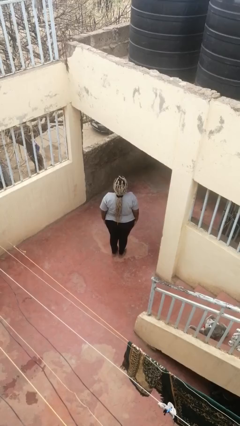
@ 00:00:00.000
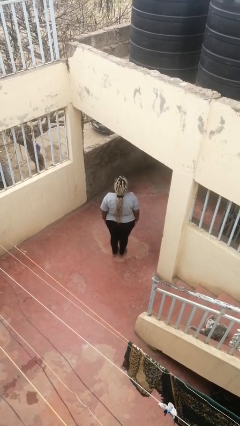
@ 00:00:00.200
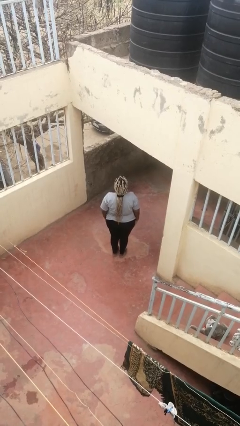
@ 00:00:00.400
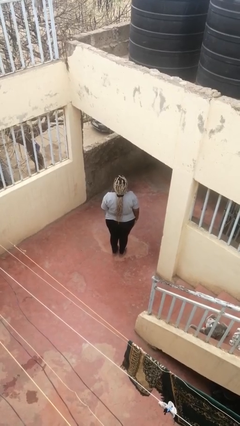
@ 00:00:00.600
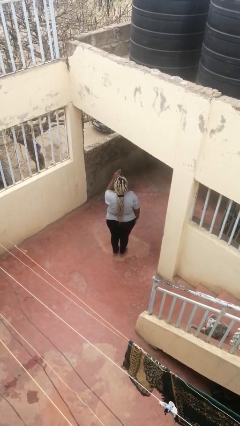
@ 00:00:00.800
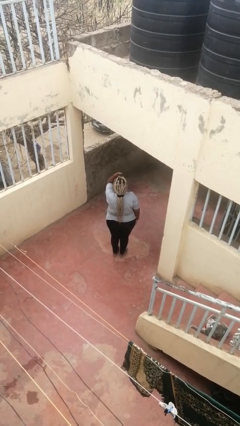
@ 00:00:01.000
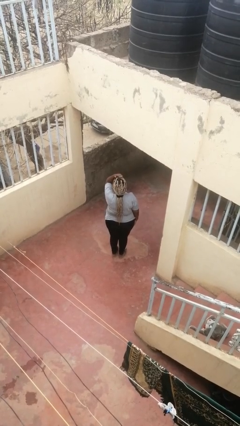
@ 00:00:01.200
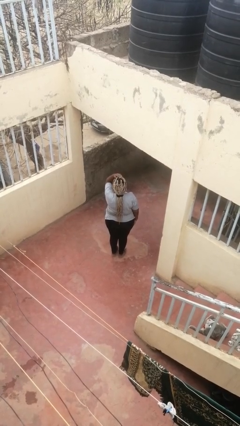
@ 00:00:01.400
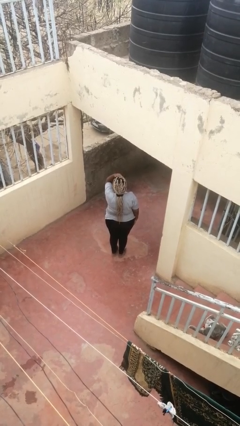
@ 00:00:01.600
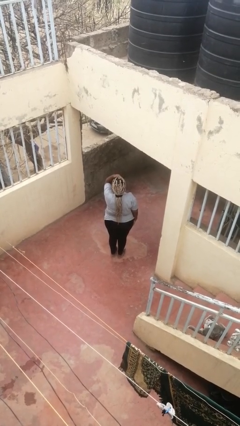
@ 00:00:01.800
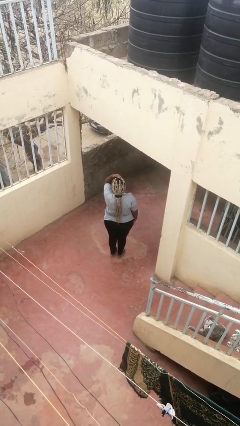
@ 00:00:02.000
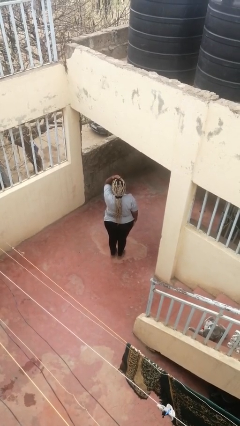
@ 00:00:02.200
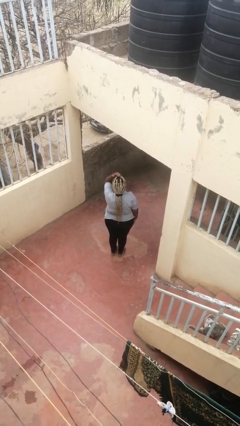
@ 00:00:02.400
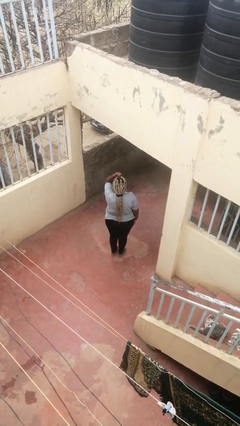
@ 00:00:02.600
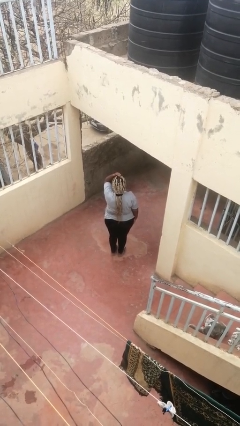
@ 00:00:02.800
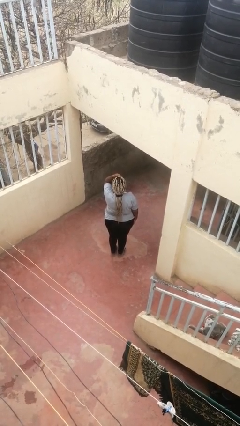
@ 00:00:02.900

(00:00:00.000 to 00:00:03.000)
person pats head

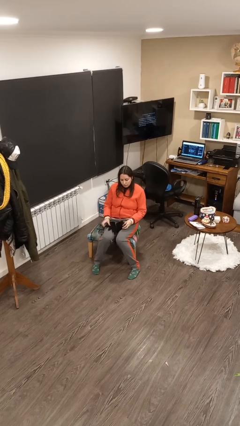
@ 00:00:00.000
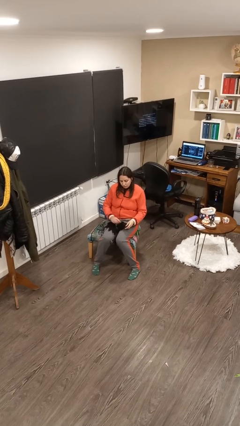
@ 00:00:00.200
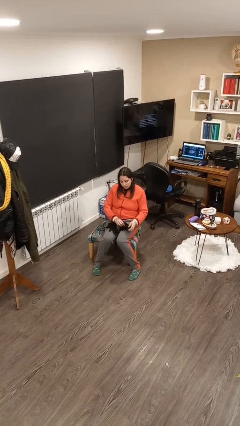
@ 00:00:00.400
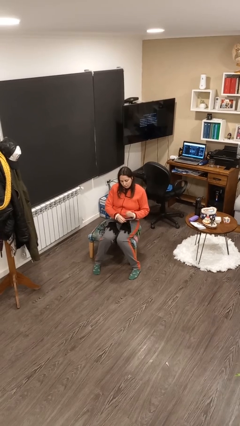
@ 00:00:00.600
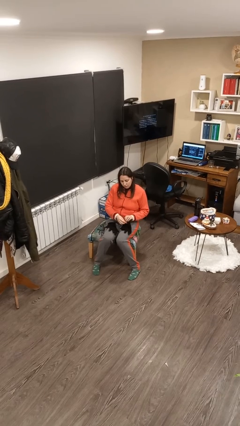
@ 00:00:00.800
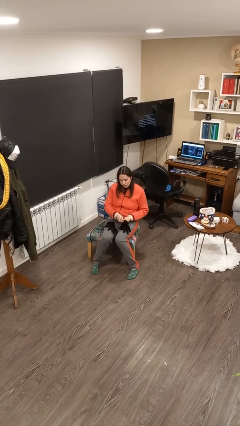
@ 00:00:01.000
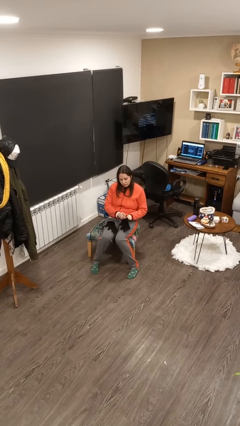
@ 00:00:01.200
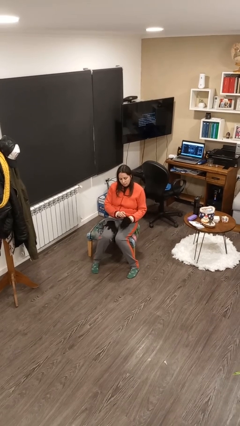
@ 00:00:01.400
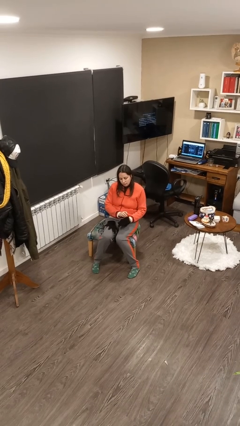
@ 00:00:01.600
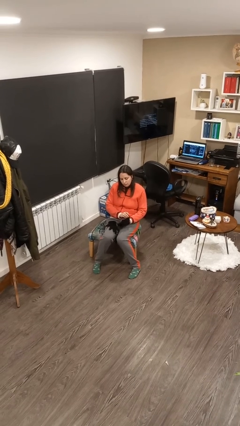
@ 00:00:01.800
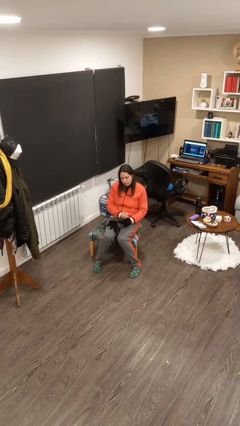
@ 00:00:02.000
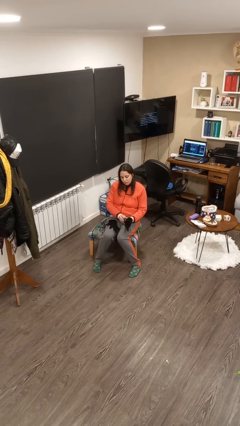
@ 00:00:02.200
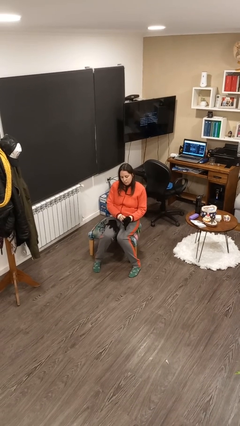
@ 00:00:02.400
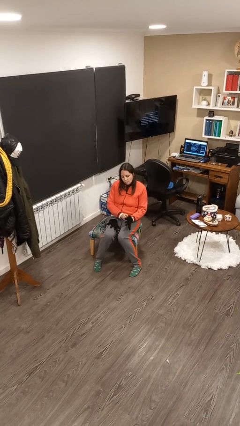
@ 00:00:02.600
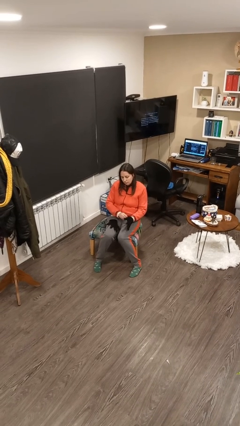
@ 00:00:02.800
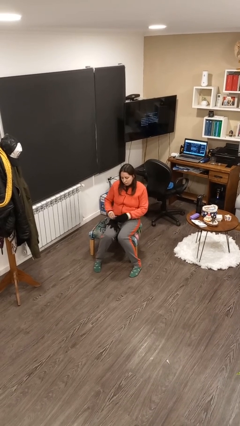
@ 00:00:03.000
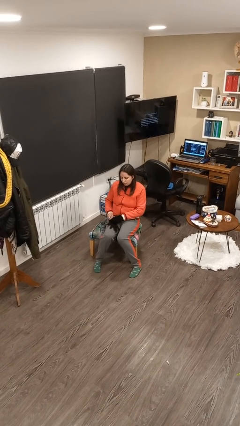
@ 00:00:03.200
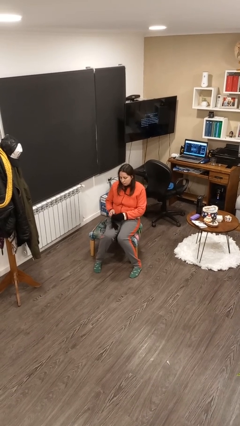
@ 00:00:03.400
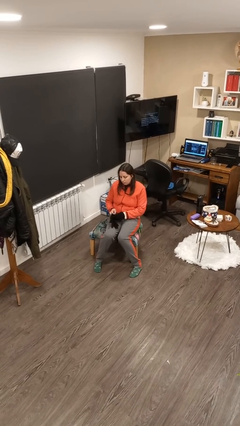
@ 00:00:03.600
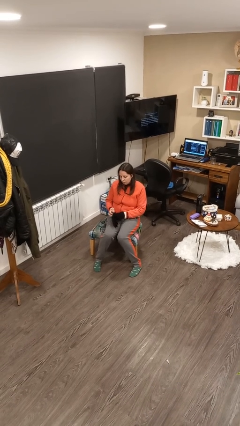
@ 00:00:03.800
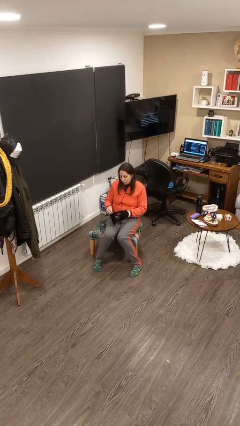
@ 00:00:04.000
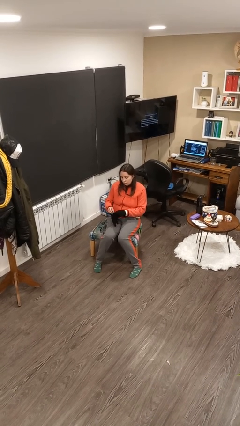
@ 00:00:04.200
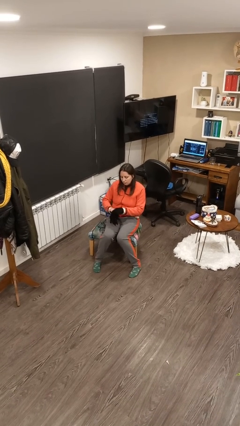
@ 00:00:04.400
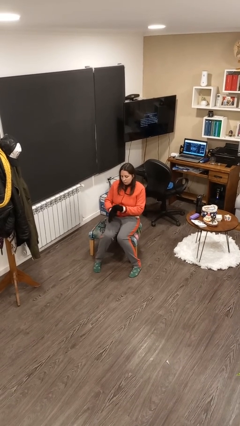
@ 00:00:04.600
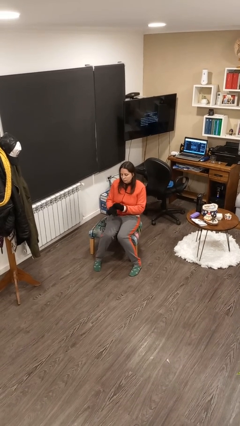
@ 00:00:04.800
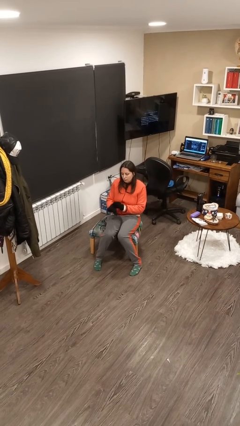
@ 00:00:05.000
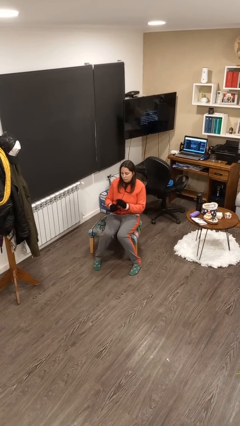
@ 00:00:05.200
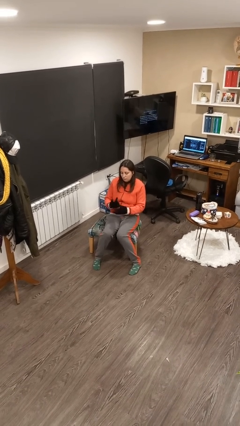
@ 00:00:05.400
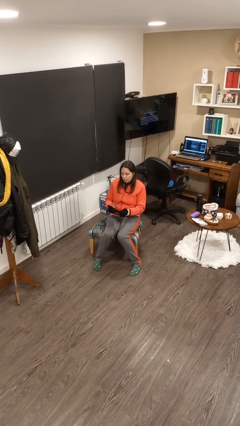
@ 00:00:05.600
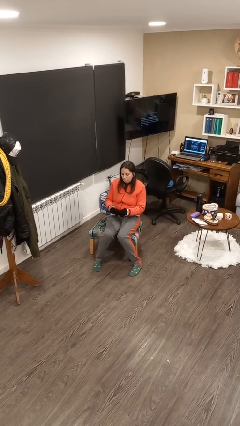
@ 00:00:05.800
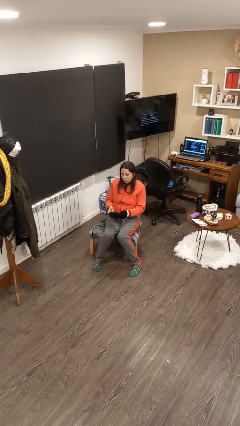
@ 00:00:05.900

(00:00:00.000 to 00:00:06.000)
person puts on gloves

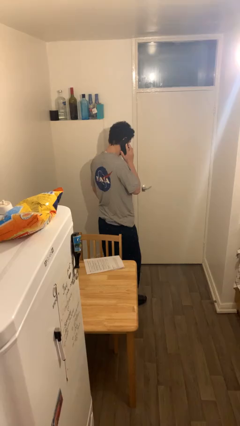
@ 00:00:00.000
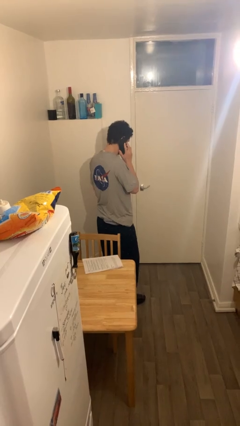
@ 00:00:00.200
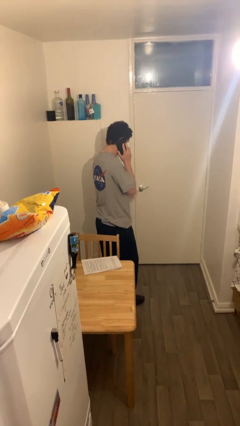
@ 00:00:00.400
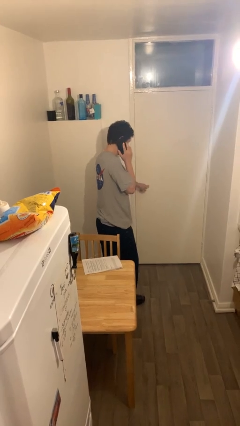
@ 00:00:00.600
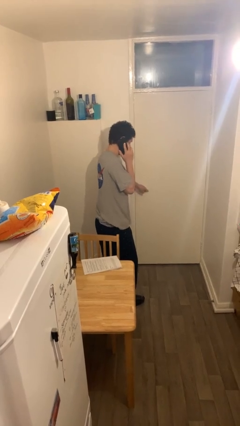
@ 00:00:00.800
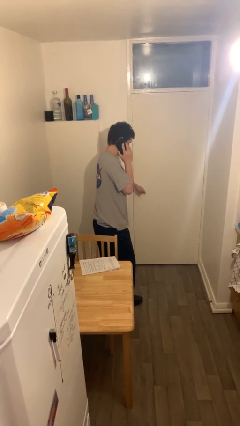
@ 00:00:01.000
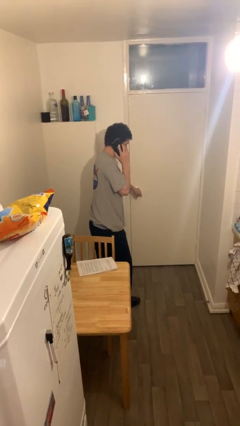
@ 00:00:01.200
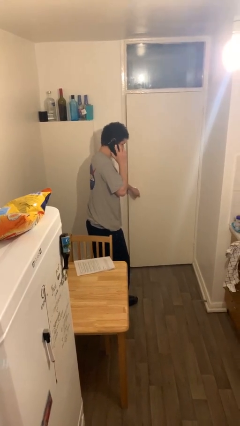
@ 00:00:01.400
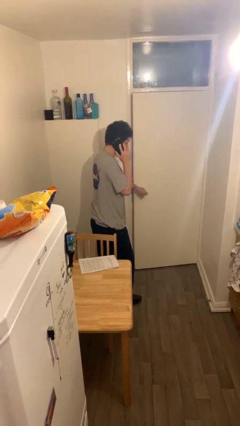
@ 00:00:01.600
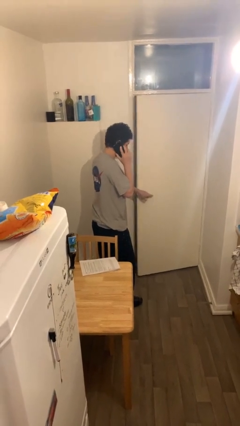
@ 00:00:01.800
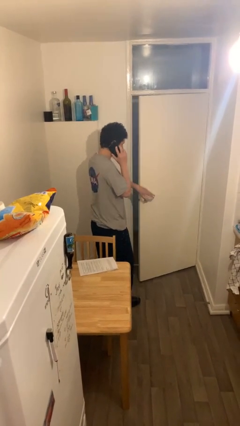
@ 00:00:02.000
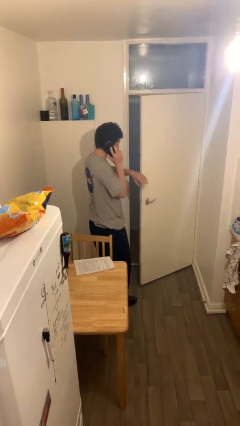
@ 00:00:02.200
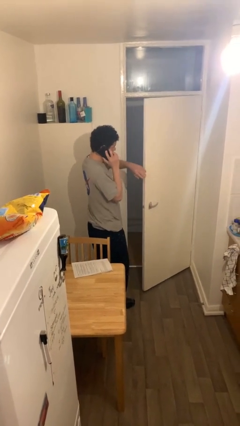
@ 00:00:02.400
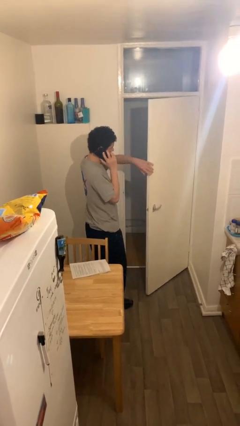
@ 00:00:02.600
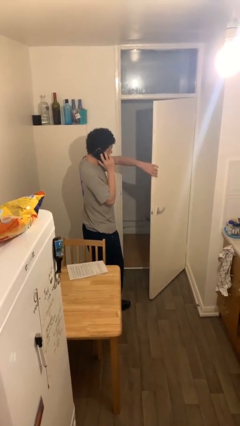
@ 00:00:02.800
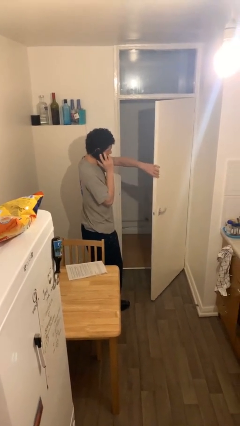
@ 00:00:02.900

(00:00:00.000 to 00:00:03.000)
person opens facility door

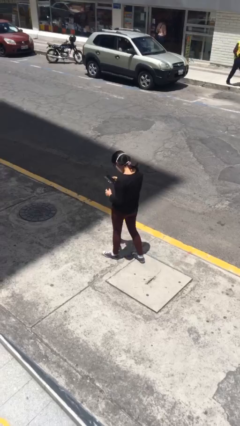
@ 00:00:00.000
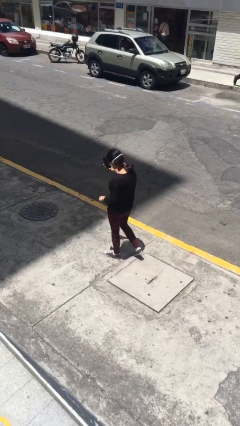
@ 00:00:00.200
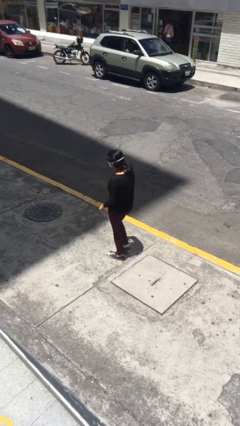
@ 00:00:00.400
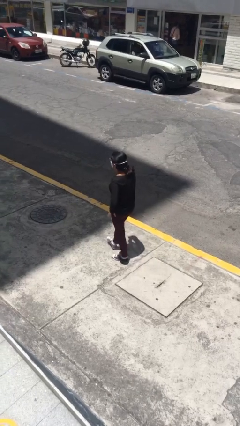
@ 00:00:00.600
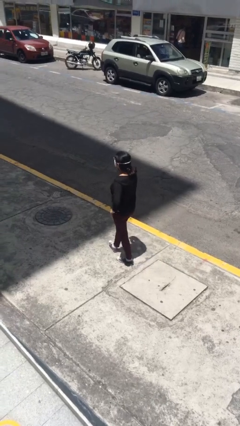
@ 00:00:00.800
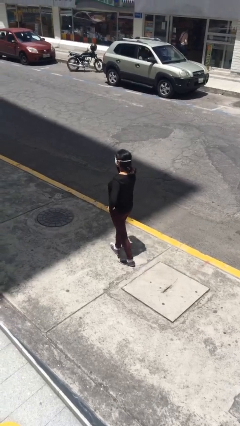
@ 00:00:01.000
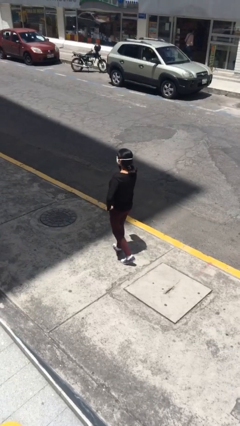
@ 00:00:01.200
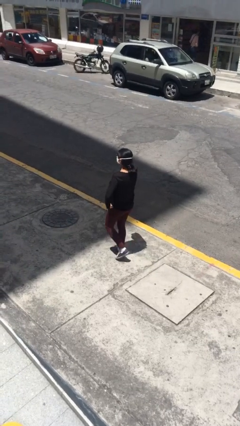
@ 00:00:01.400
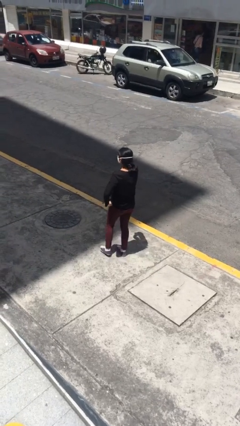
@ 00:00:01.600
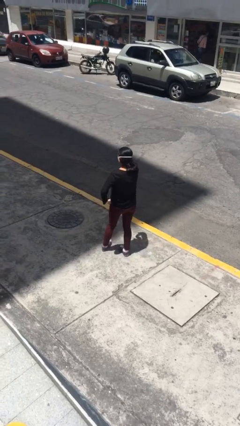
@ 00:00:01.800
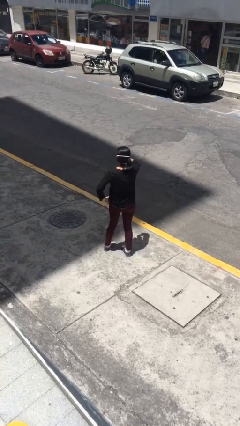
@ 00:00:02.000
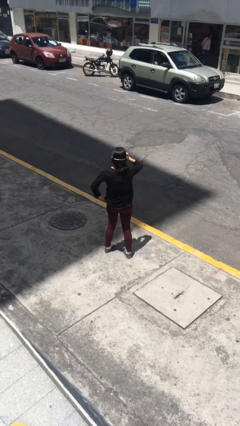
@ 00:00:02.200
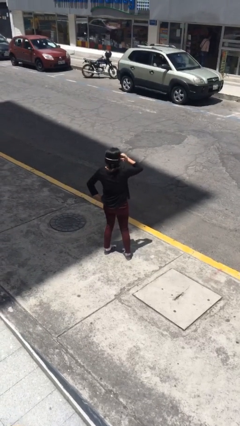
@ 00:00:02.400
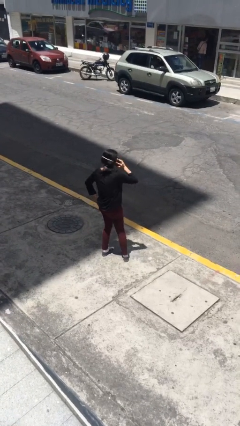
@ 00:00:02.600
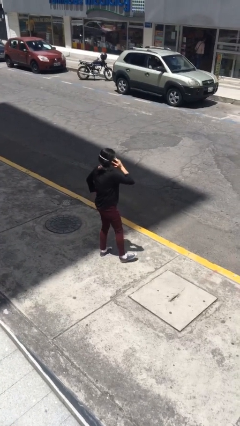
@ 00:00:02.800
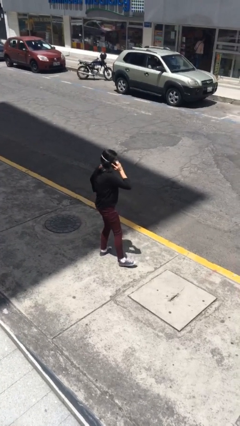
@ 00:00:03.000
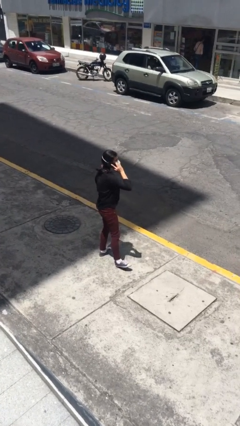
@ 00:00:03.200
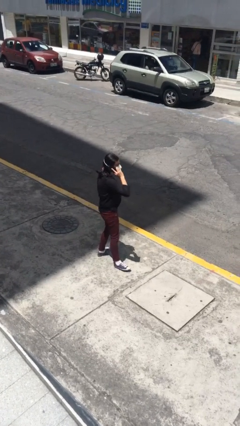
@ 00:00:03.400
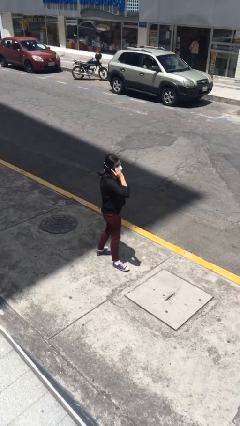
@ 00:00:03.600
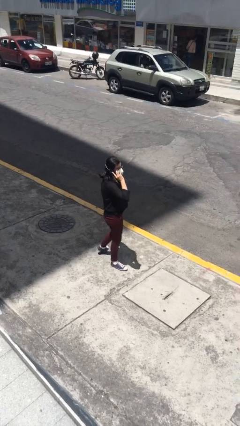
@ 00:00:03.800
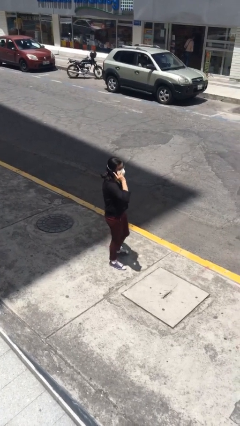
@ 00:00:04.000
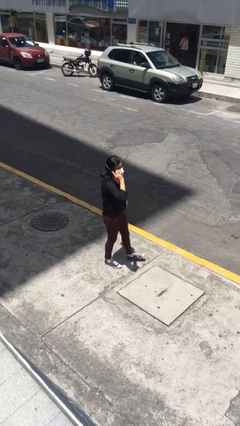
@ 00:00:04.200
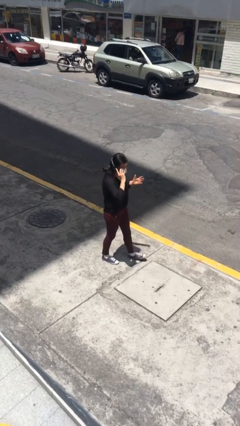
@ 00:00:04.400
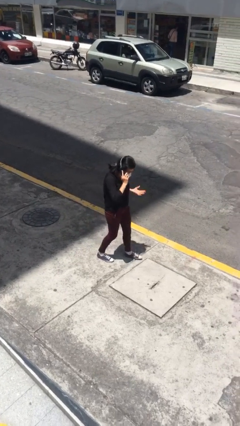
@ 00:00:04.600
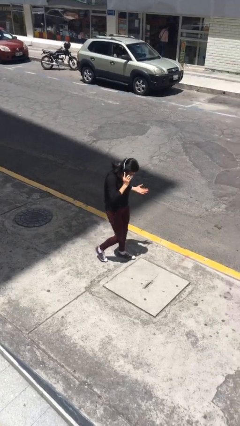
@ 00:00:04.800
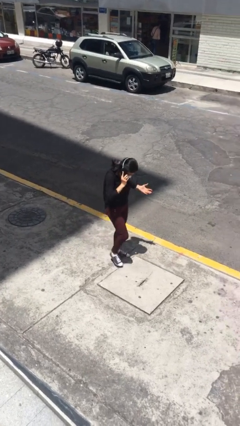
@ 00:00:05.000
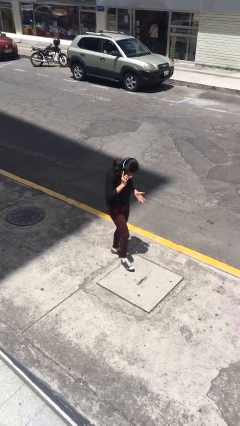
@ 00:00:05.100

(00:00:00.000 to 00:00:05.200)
person talks on phone
